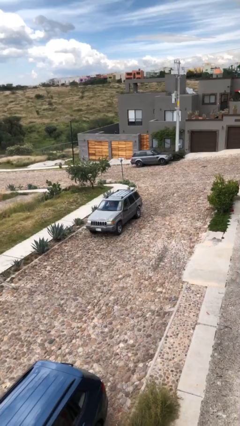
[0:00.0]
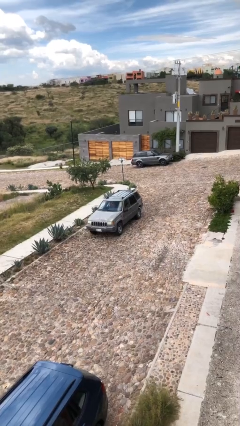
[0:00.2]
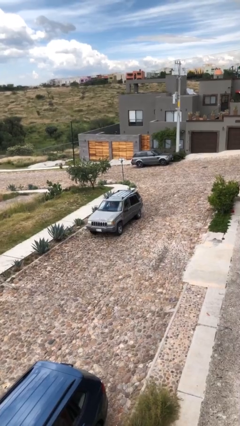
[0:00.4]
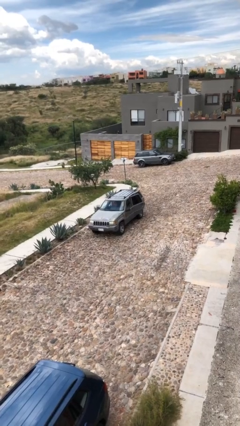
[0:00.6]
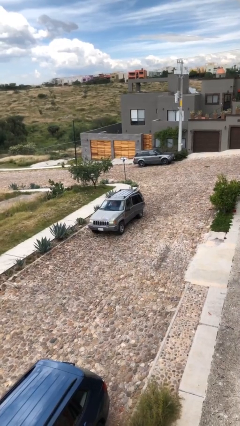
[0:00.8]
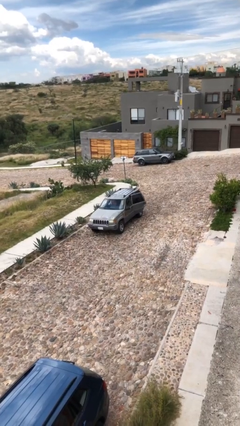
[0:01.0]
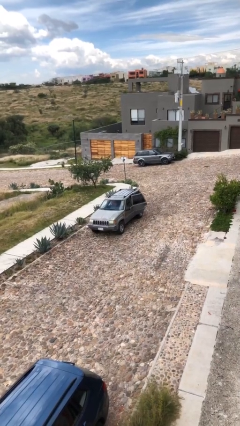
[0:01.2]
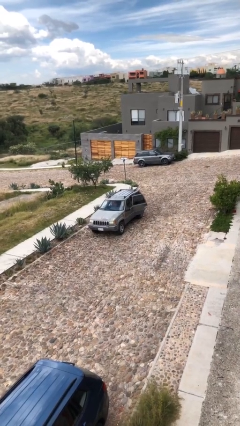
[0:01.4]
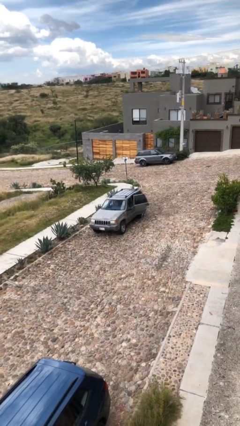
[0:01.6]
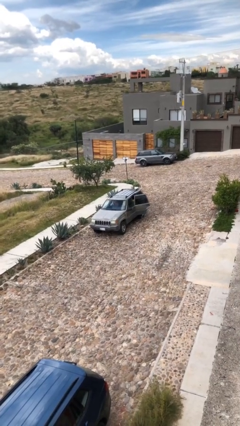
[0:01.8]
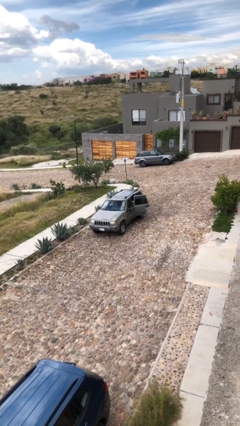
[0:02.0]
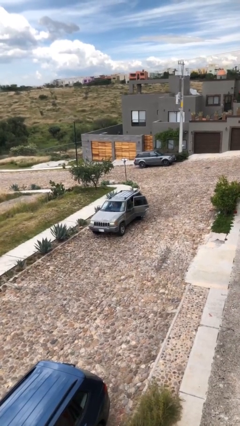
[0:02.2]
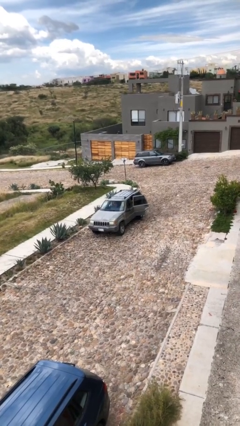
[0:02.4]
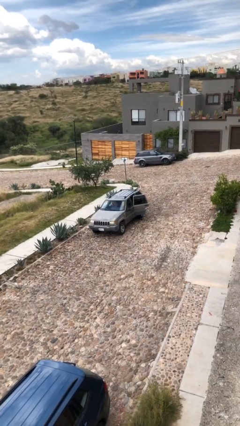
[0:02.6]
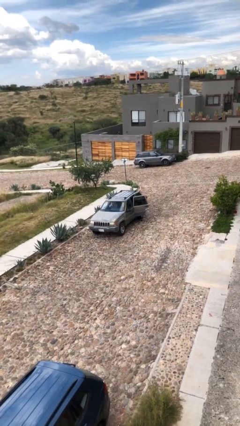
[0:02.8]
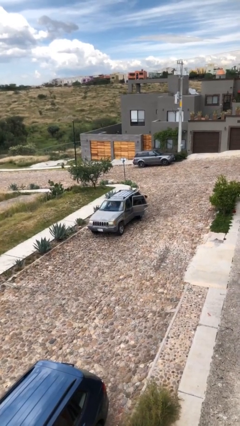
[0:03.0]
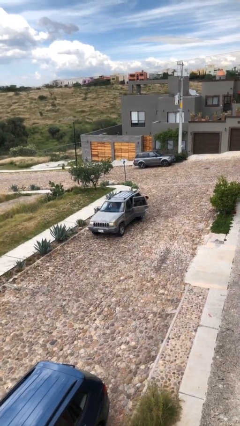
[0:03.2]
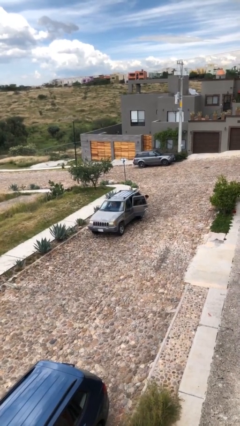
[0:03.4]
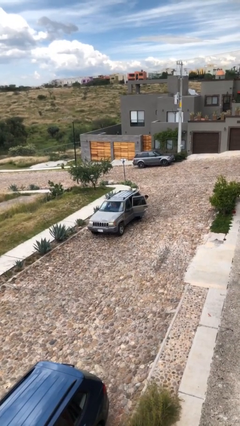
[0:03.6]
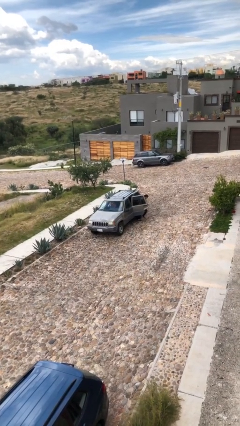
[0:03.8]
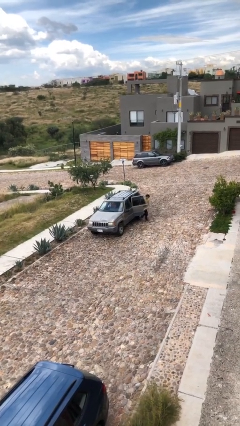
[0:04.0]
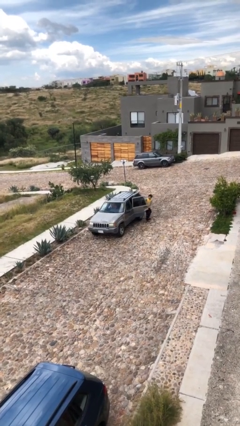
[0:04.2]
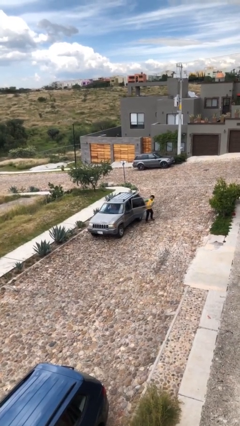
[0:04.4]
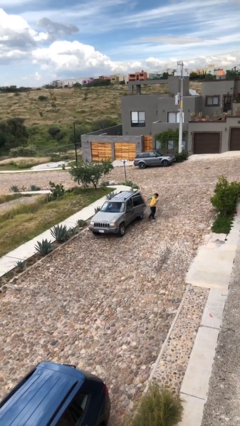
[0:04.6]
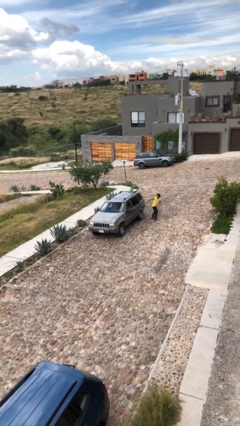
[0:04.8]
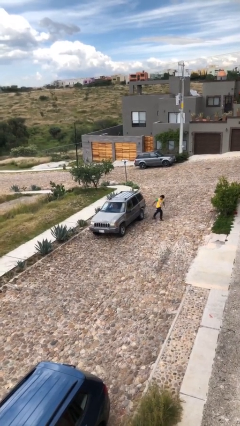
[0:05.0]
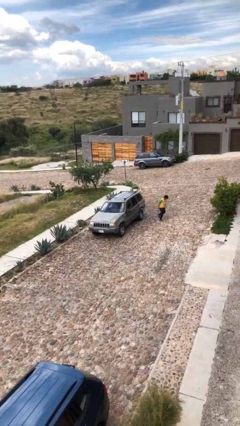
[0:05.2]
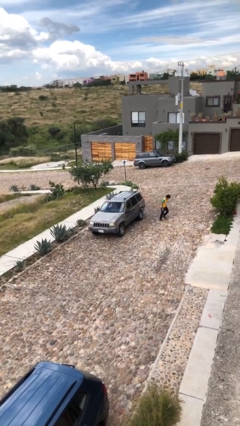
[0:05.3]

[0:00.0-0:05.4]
car drops off person

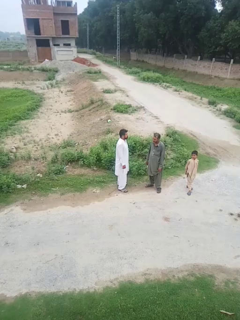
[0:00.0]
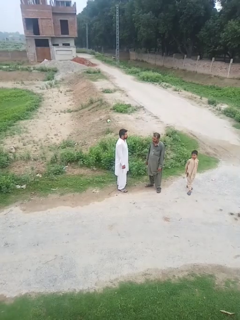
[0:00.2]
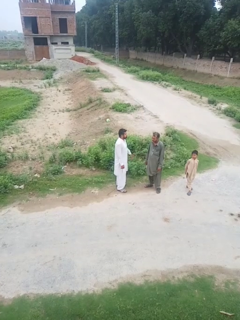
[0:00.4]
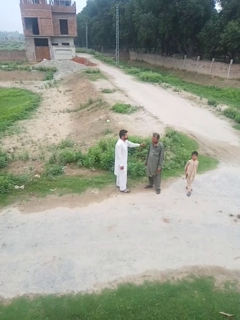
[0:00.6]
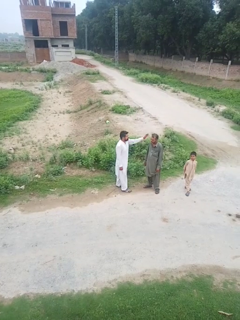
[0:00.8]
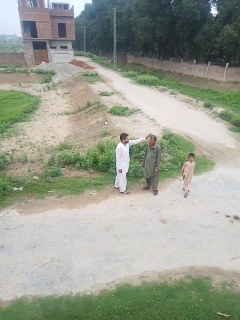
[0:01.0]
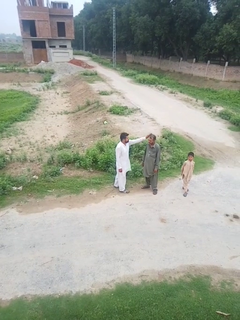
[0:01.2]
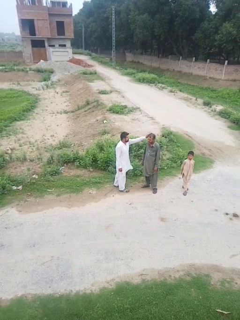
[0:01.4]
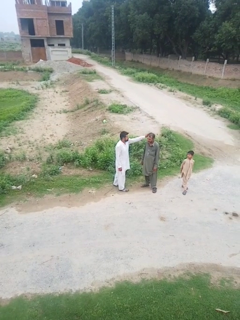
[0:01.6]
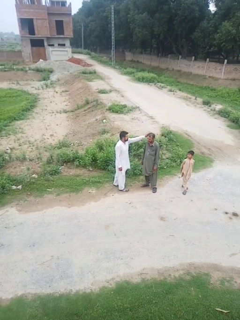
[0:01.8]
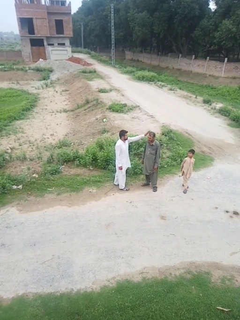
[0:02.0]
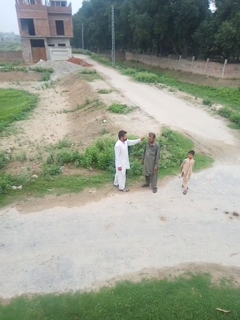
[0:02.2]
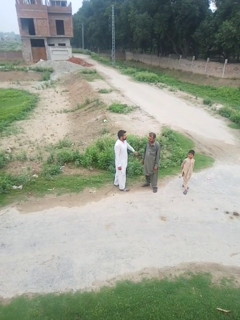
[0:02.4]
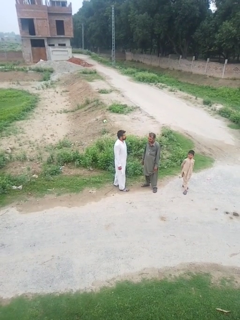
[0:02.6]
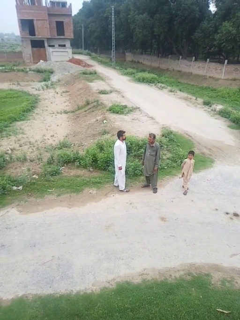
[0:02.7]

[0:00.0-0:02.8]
person touches face of person

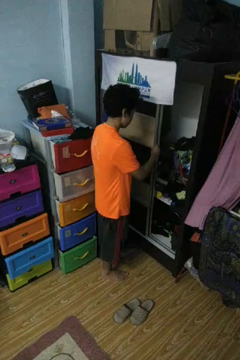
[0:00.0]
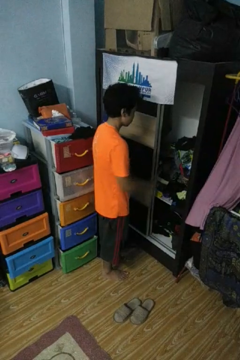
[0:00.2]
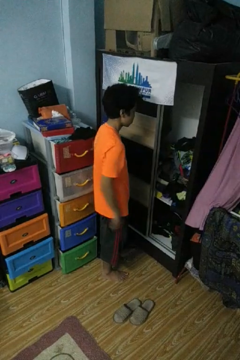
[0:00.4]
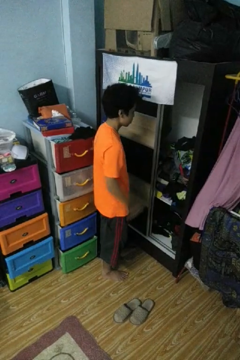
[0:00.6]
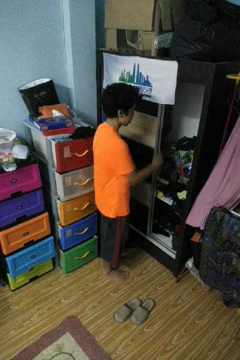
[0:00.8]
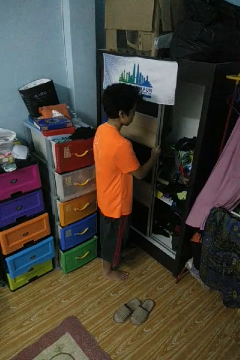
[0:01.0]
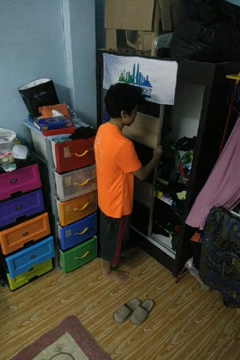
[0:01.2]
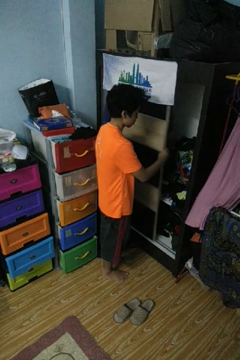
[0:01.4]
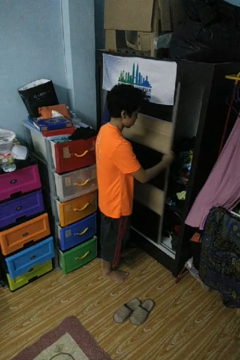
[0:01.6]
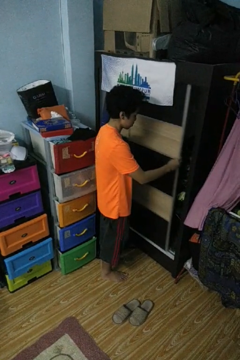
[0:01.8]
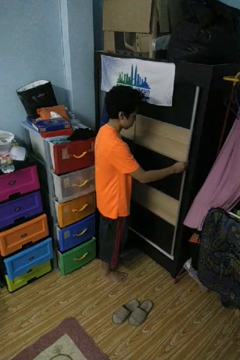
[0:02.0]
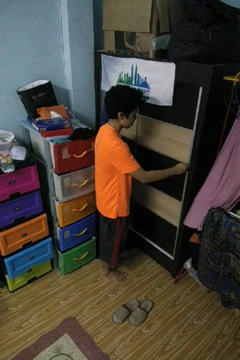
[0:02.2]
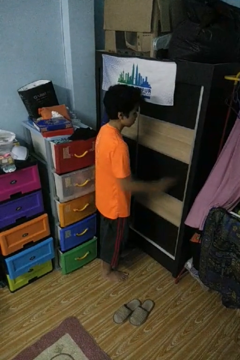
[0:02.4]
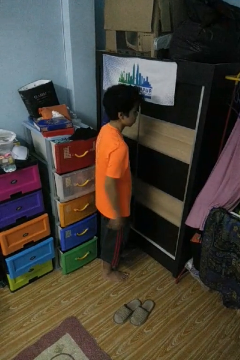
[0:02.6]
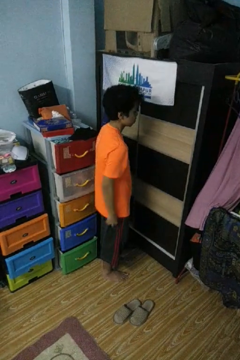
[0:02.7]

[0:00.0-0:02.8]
person closes closet door

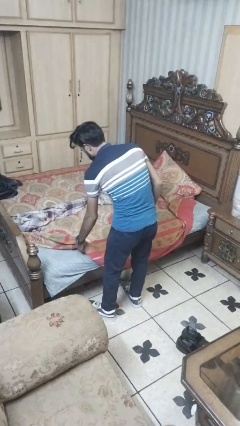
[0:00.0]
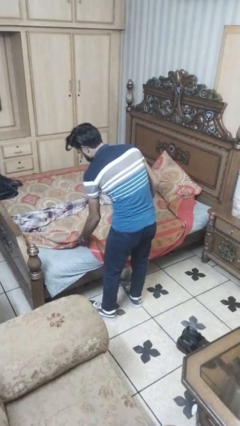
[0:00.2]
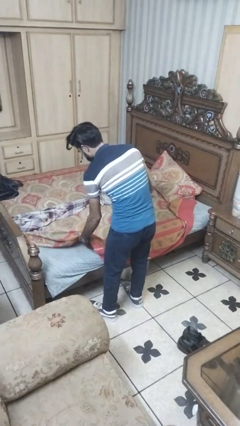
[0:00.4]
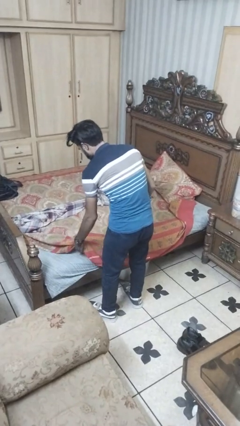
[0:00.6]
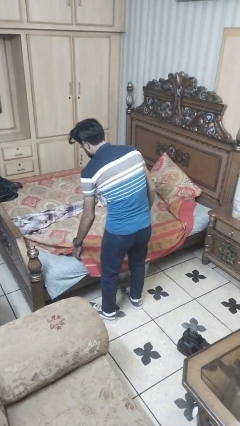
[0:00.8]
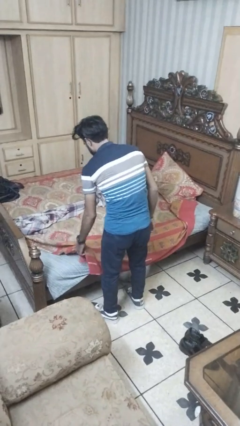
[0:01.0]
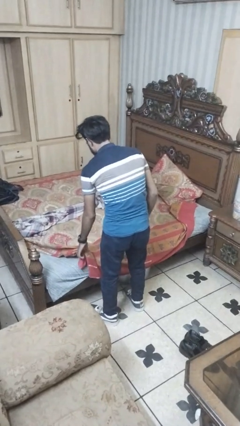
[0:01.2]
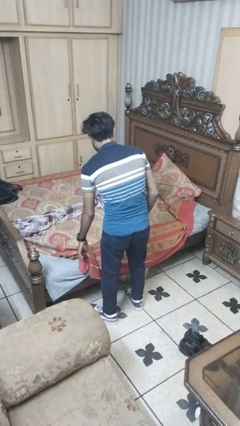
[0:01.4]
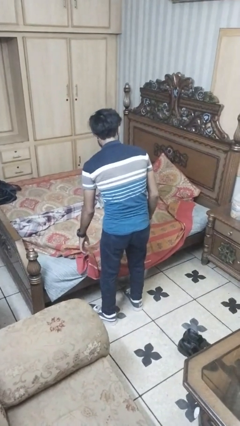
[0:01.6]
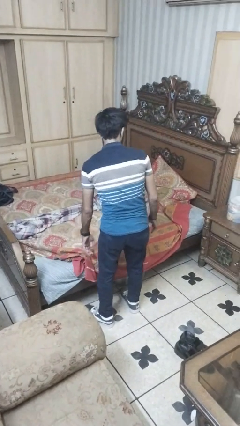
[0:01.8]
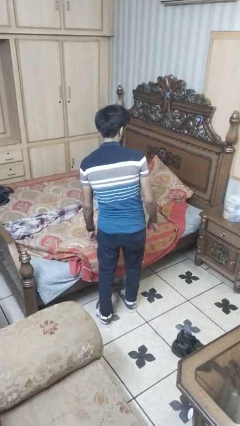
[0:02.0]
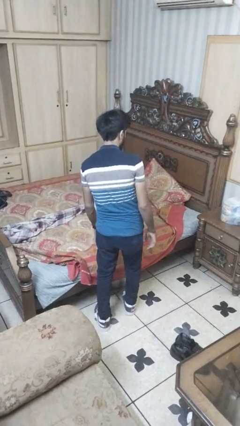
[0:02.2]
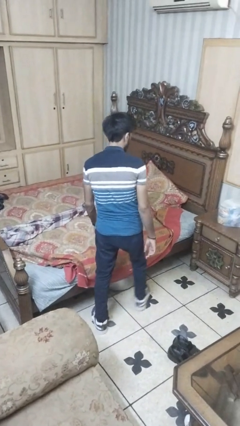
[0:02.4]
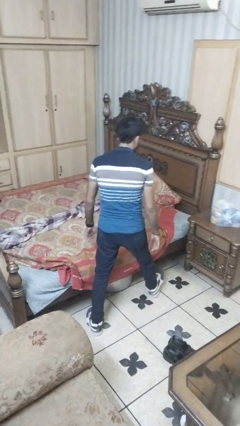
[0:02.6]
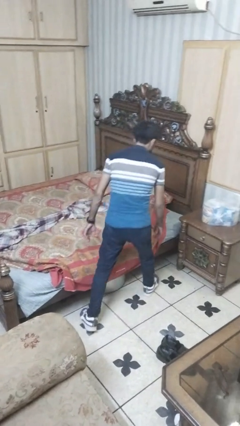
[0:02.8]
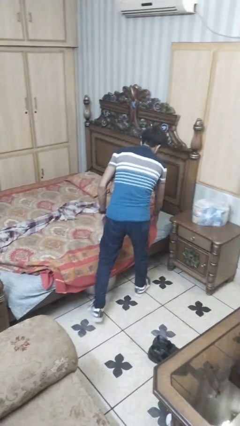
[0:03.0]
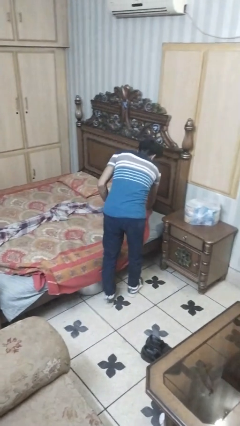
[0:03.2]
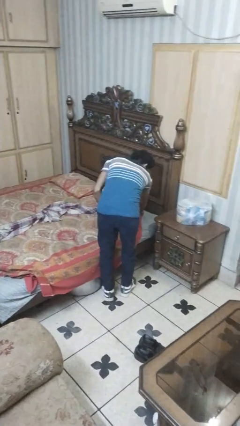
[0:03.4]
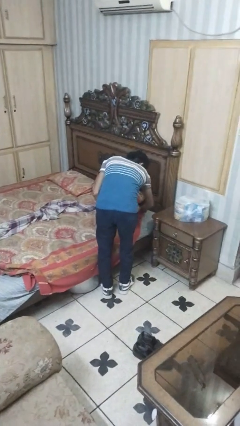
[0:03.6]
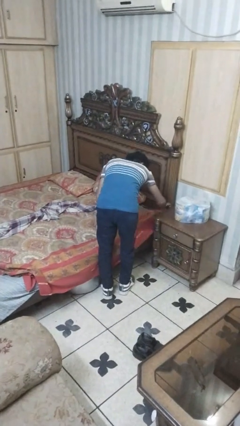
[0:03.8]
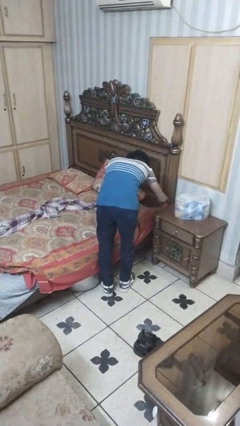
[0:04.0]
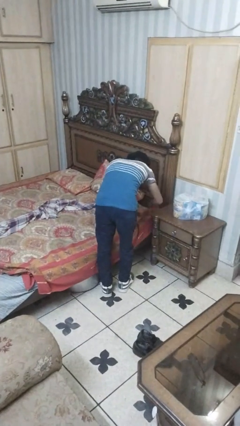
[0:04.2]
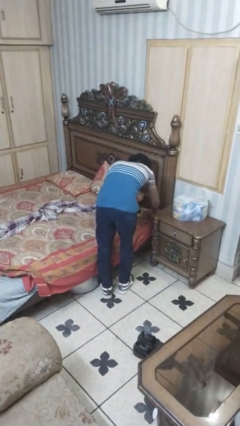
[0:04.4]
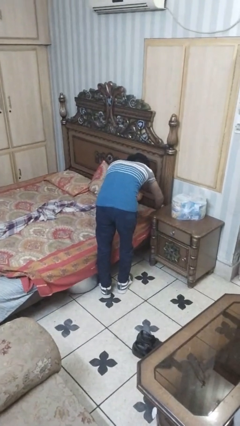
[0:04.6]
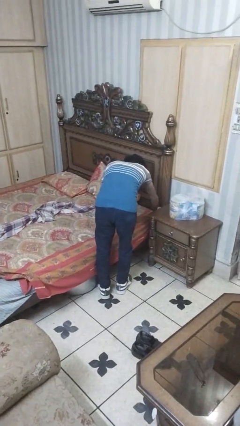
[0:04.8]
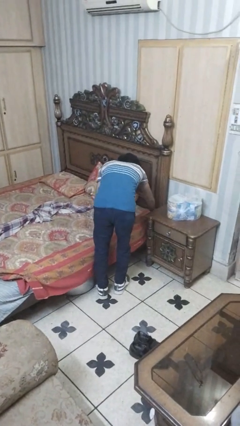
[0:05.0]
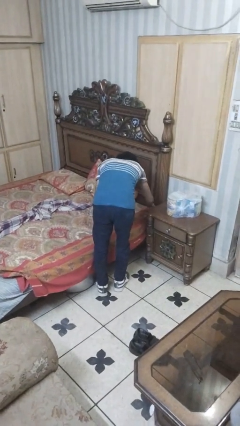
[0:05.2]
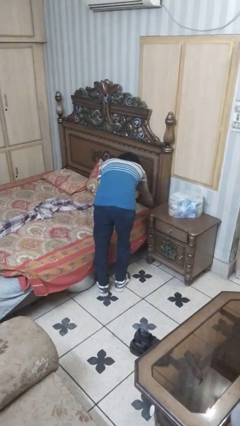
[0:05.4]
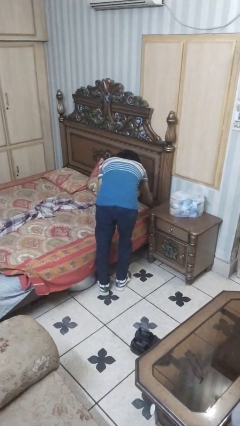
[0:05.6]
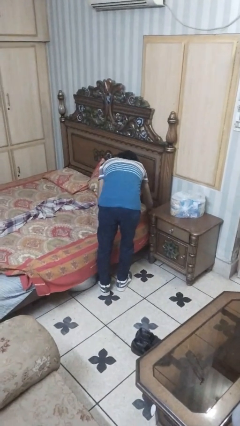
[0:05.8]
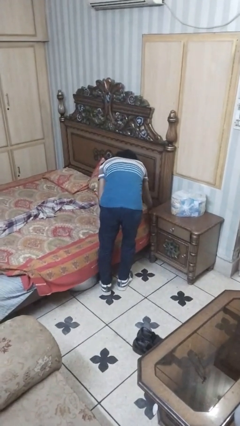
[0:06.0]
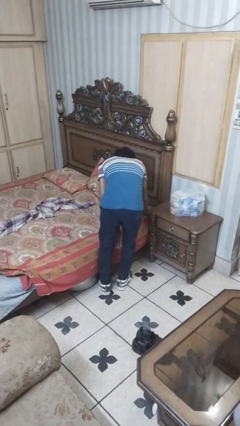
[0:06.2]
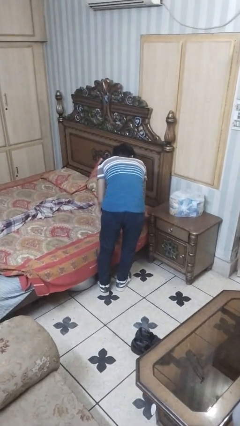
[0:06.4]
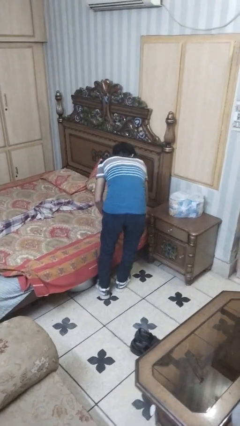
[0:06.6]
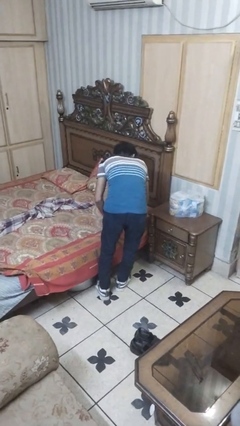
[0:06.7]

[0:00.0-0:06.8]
person makes bed

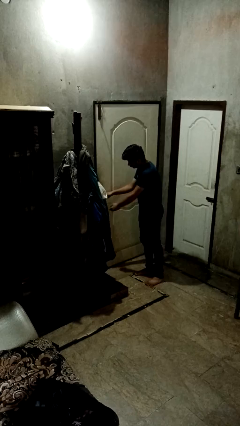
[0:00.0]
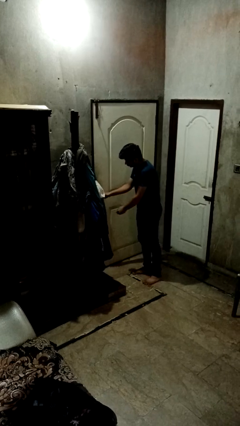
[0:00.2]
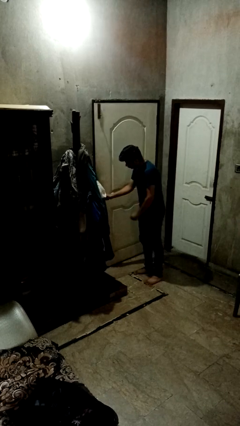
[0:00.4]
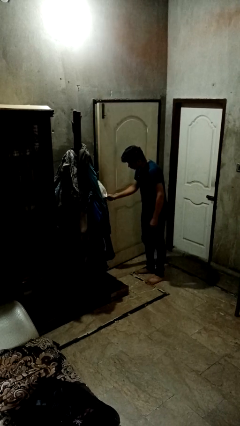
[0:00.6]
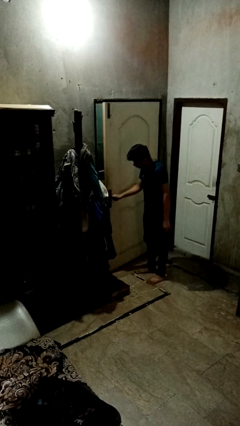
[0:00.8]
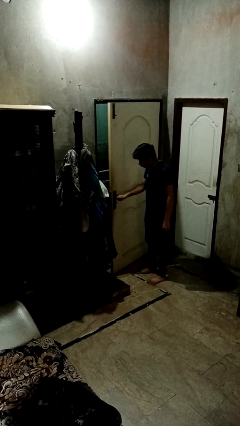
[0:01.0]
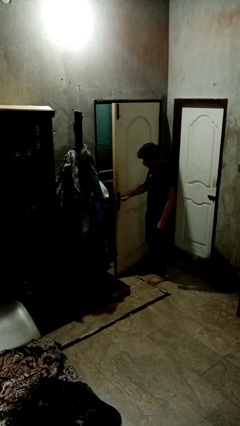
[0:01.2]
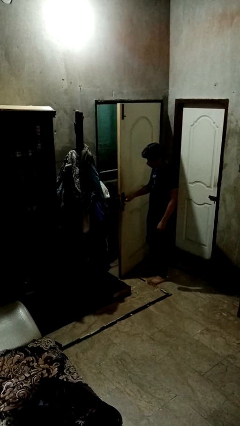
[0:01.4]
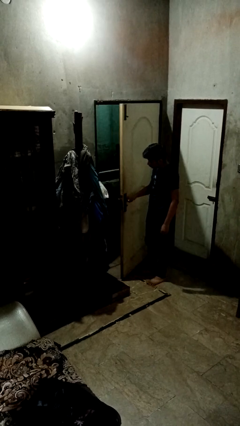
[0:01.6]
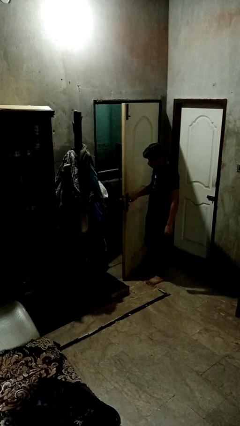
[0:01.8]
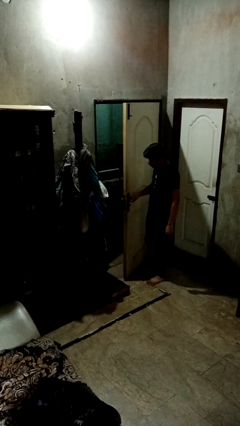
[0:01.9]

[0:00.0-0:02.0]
person opens facility door
